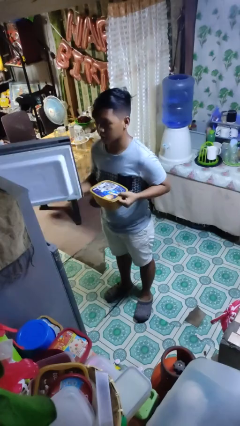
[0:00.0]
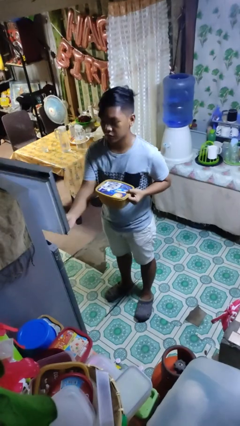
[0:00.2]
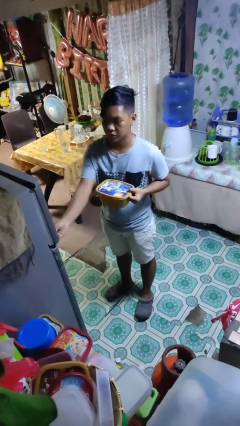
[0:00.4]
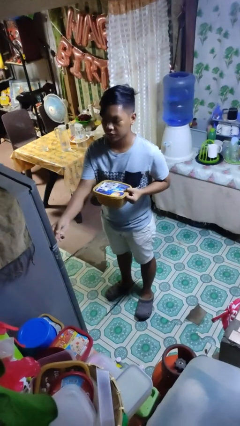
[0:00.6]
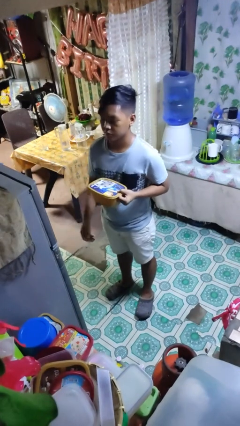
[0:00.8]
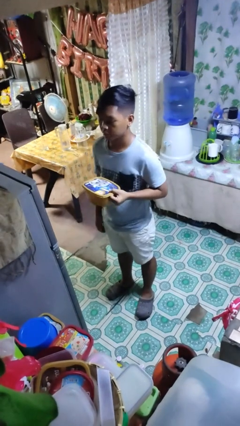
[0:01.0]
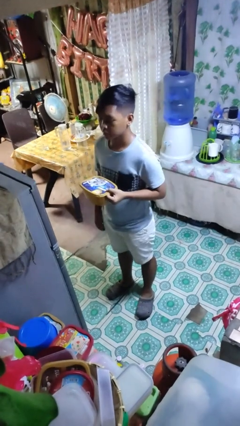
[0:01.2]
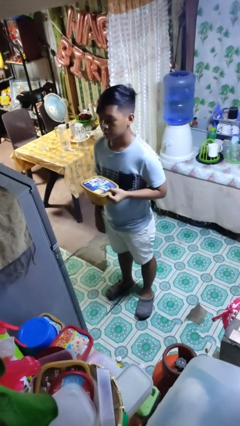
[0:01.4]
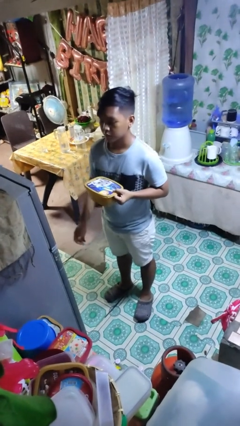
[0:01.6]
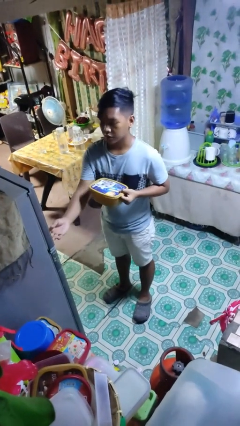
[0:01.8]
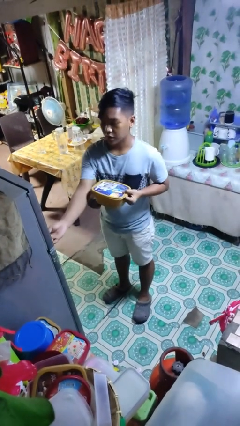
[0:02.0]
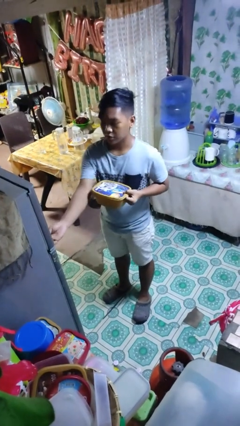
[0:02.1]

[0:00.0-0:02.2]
person closes refrigerator

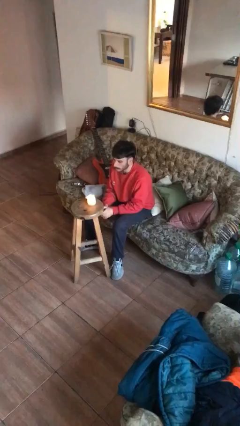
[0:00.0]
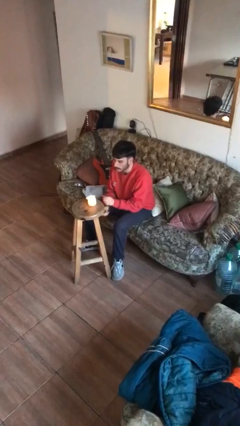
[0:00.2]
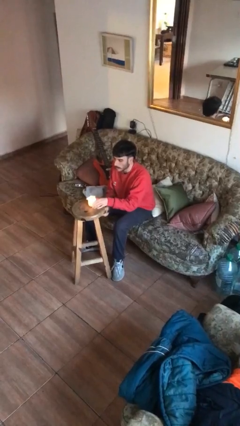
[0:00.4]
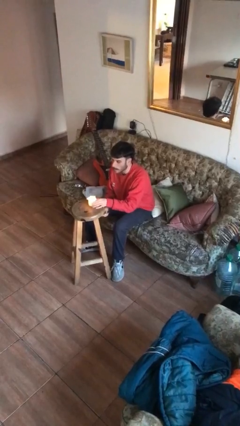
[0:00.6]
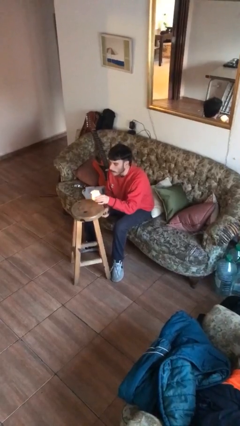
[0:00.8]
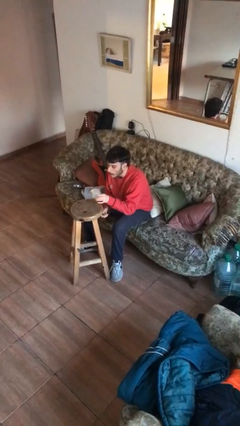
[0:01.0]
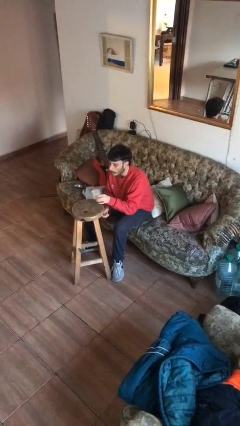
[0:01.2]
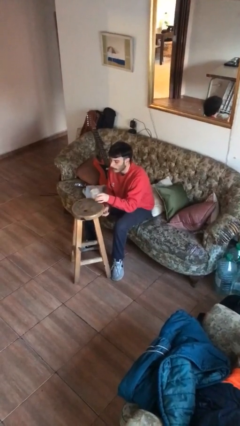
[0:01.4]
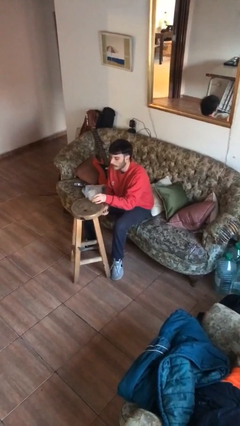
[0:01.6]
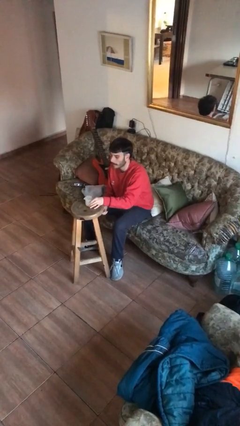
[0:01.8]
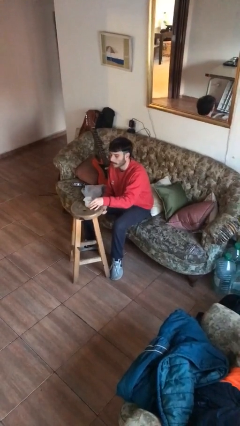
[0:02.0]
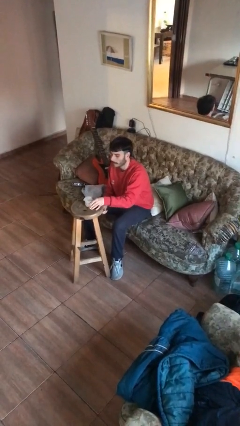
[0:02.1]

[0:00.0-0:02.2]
person extinguishes candle

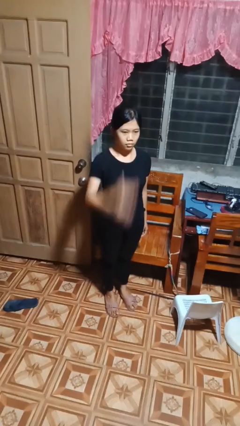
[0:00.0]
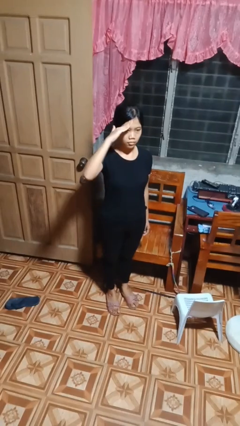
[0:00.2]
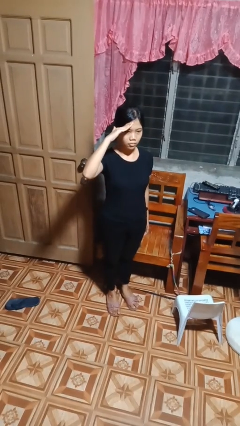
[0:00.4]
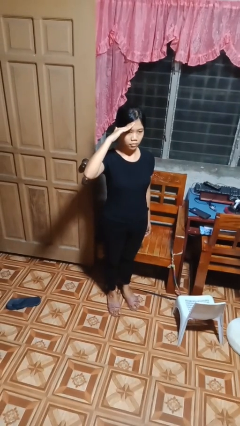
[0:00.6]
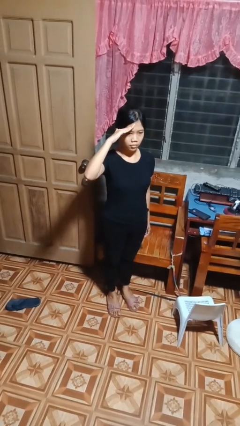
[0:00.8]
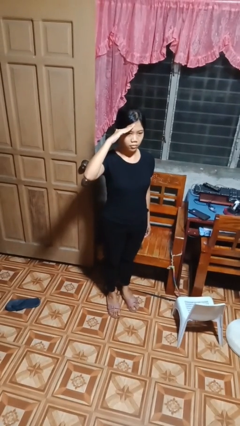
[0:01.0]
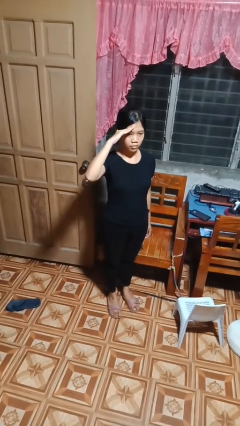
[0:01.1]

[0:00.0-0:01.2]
person salutes

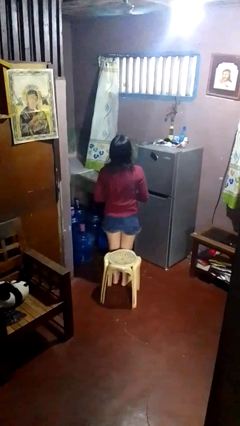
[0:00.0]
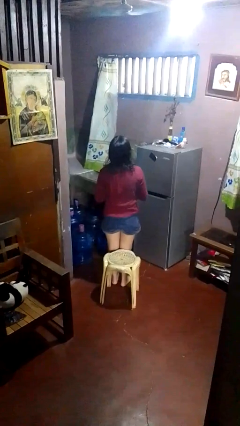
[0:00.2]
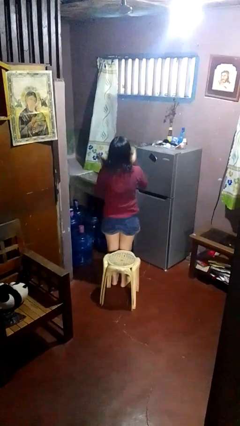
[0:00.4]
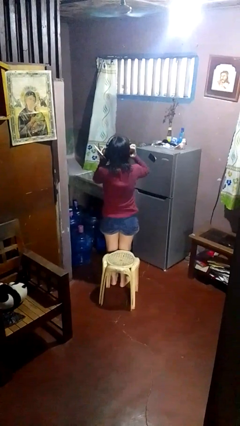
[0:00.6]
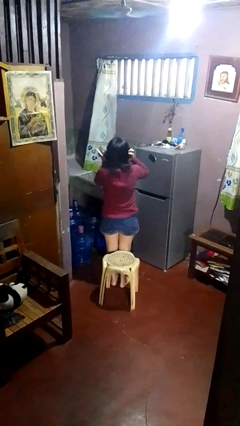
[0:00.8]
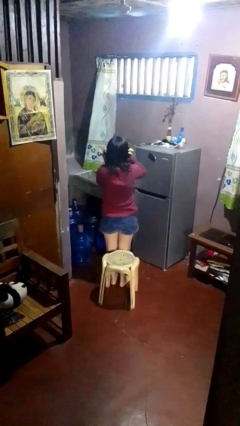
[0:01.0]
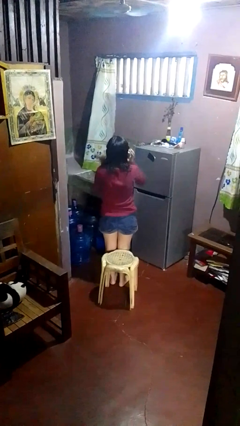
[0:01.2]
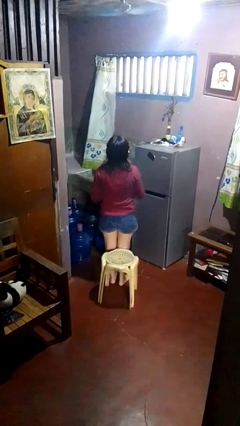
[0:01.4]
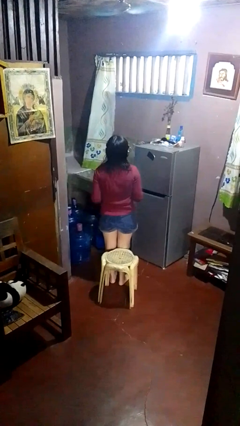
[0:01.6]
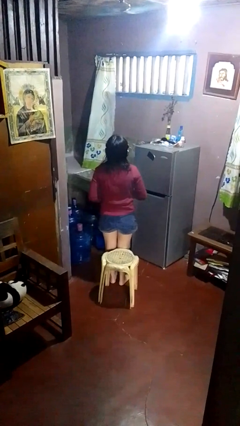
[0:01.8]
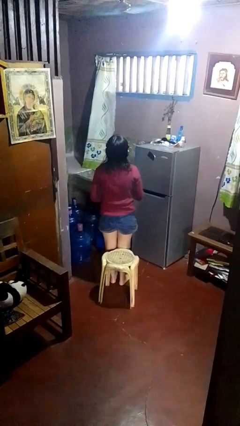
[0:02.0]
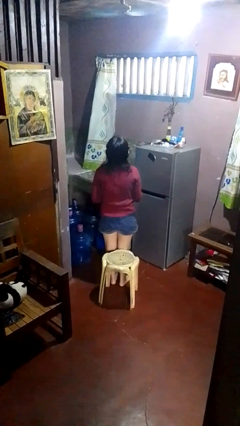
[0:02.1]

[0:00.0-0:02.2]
person puts on headphones

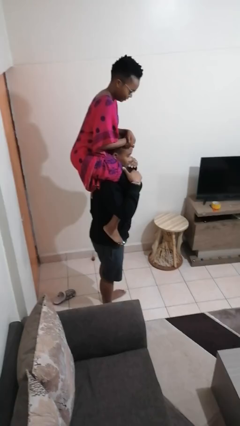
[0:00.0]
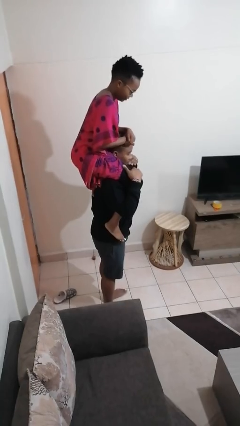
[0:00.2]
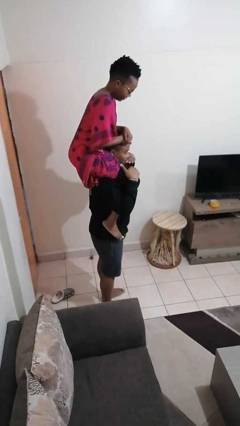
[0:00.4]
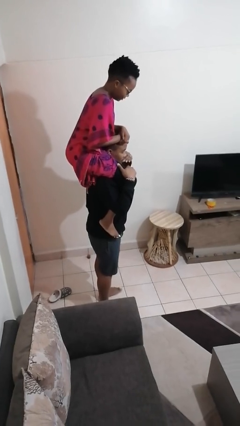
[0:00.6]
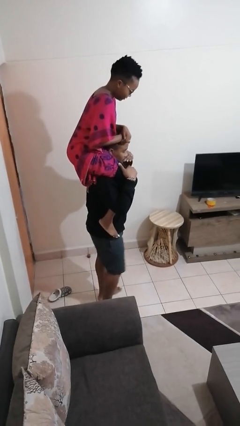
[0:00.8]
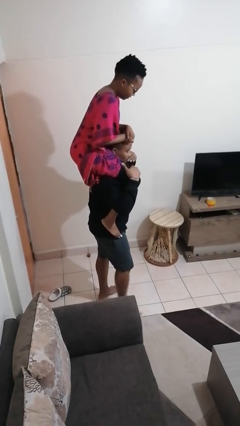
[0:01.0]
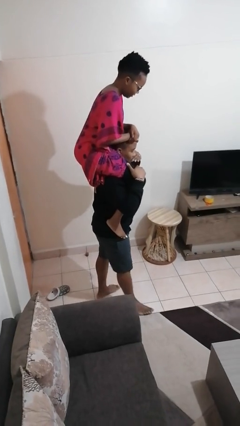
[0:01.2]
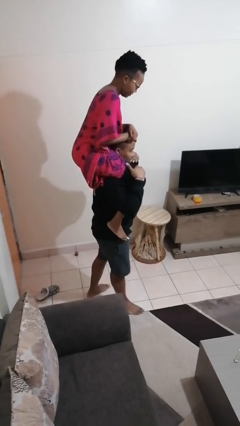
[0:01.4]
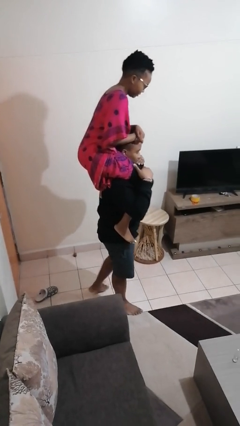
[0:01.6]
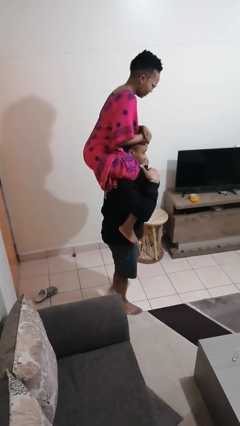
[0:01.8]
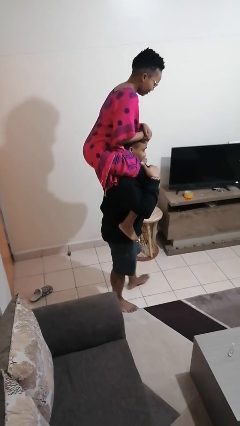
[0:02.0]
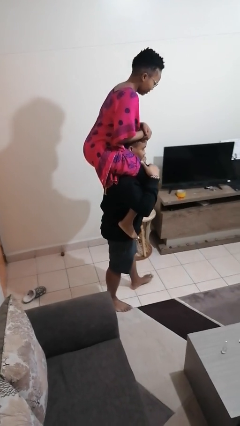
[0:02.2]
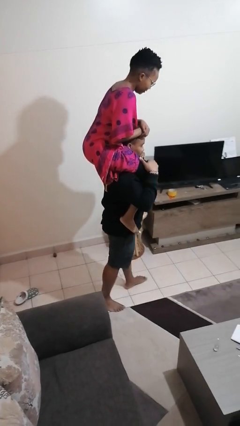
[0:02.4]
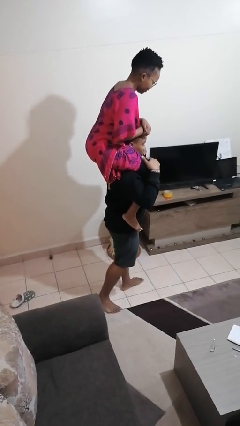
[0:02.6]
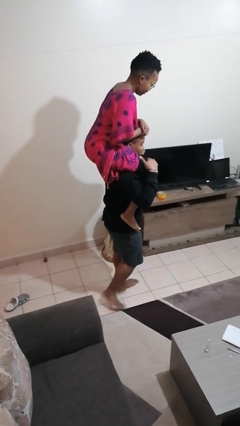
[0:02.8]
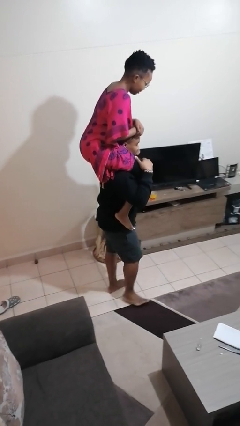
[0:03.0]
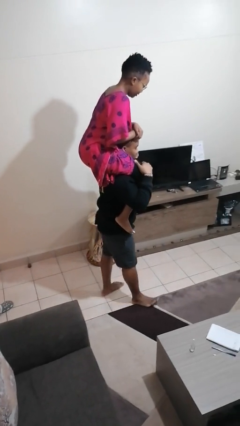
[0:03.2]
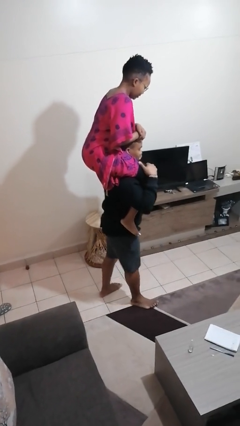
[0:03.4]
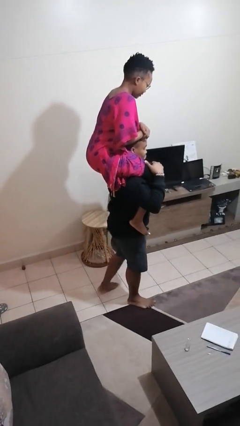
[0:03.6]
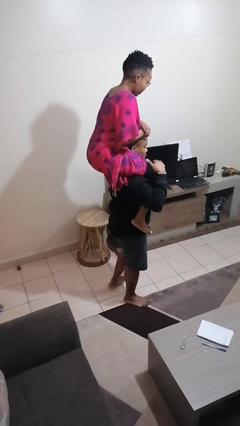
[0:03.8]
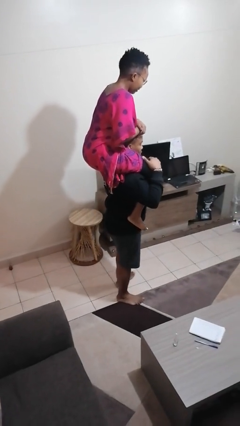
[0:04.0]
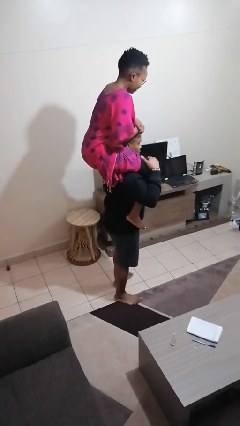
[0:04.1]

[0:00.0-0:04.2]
person carries person on shoulders

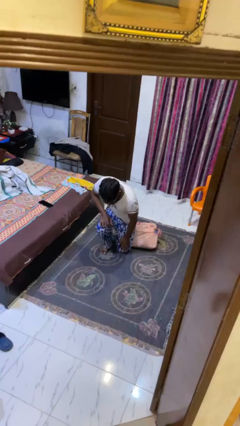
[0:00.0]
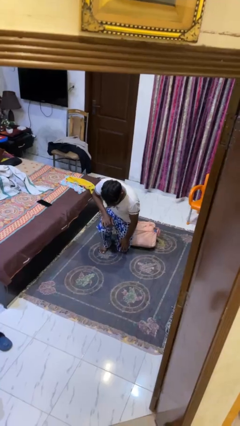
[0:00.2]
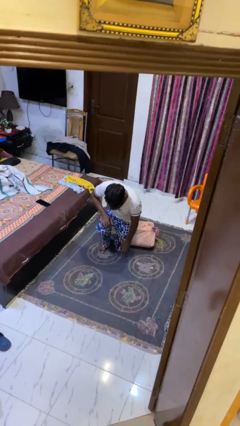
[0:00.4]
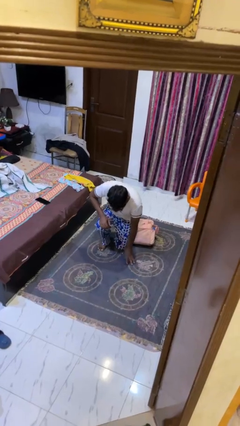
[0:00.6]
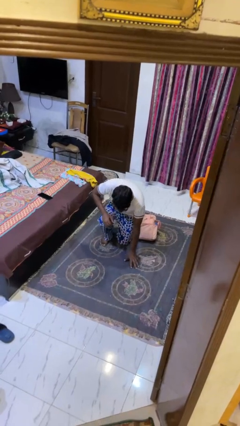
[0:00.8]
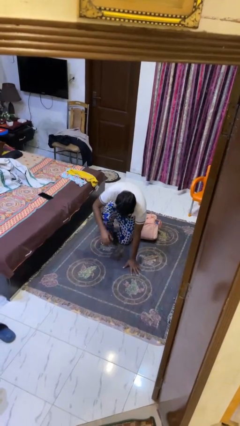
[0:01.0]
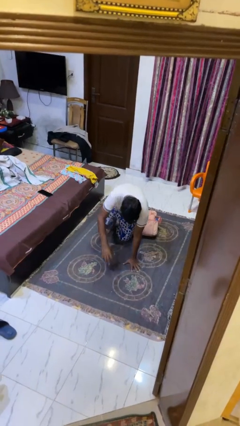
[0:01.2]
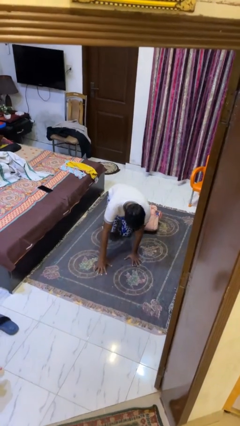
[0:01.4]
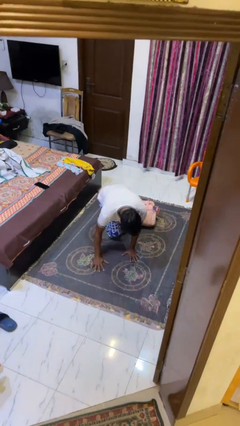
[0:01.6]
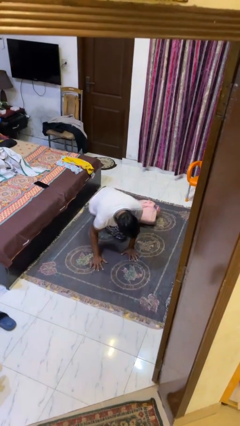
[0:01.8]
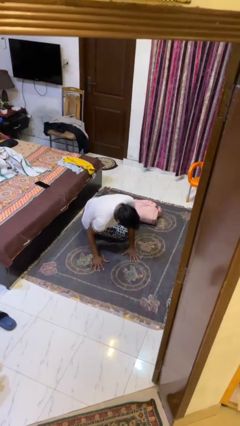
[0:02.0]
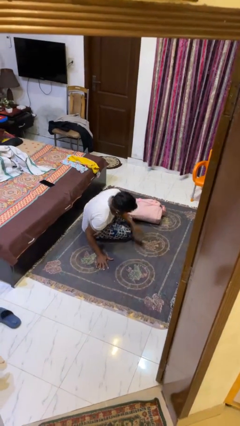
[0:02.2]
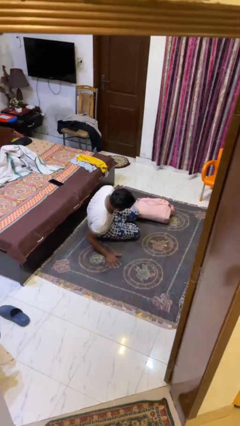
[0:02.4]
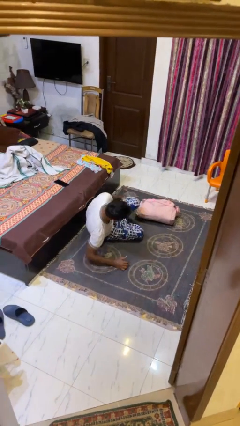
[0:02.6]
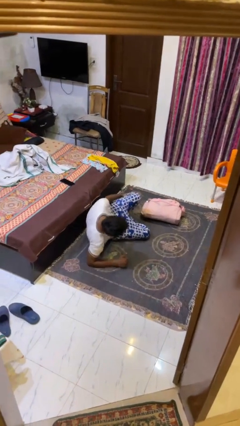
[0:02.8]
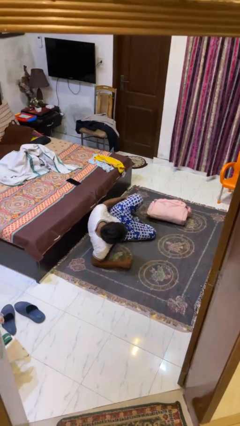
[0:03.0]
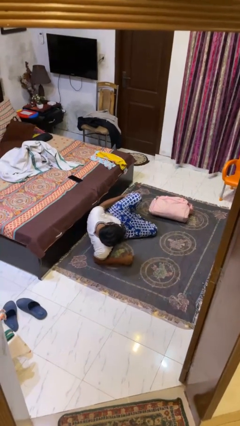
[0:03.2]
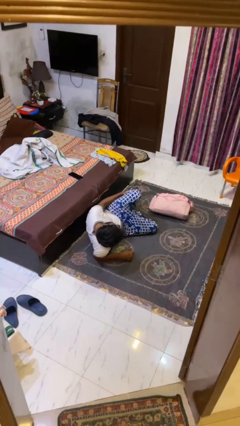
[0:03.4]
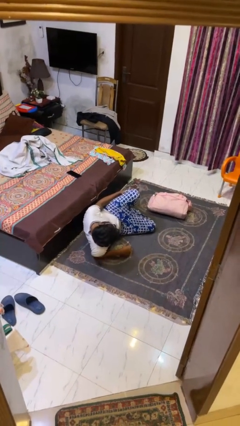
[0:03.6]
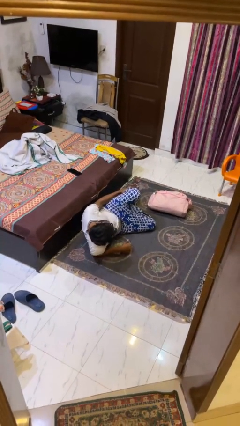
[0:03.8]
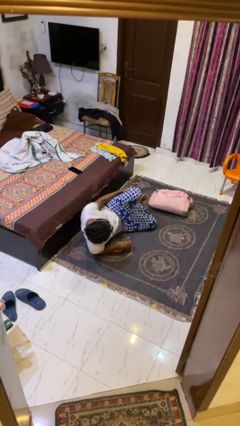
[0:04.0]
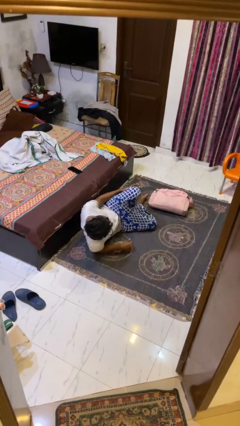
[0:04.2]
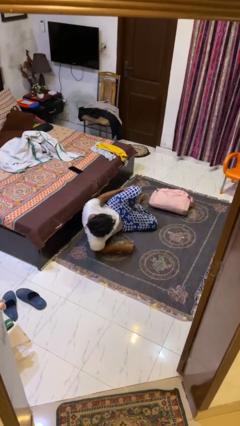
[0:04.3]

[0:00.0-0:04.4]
person lies down on floor

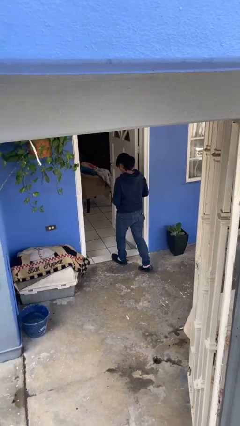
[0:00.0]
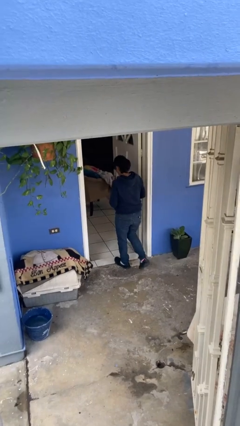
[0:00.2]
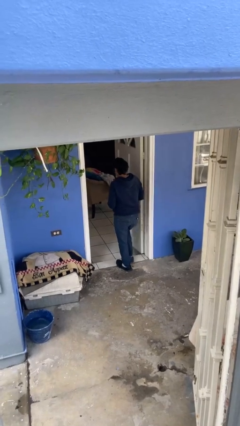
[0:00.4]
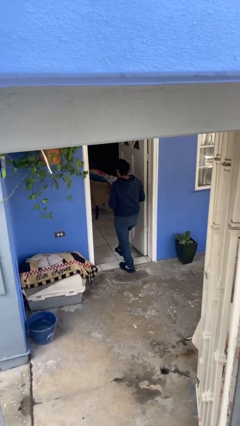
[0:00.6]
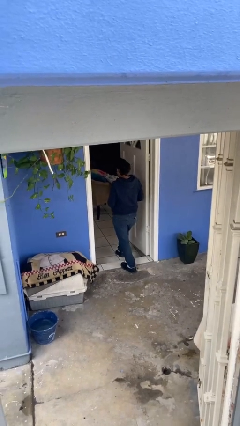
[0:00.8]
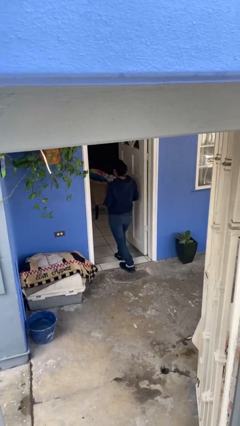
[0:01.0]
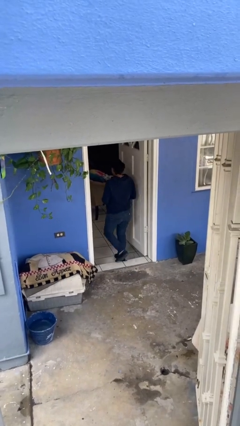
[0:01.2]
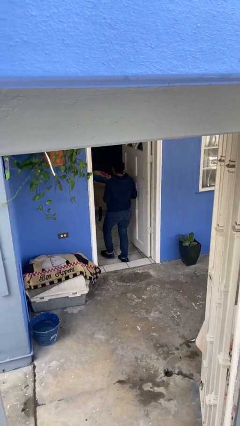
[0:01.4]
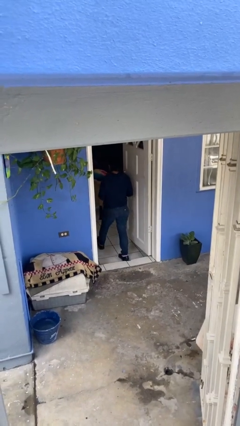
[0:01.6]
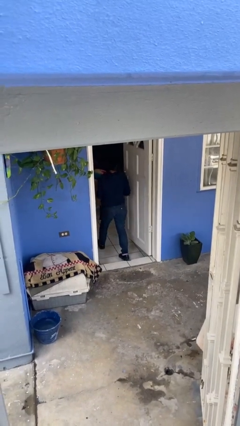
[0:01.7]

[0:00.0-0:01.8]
person exits scene through structure
